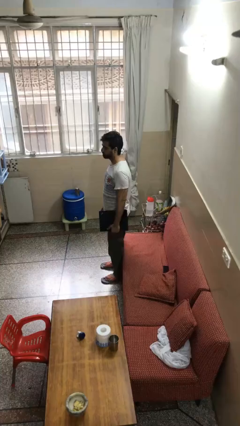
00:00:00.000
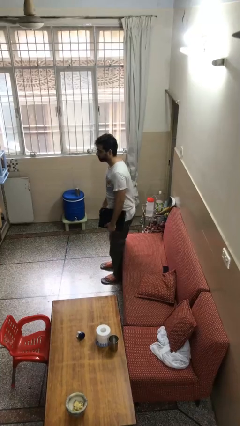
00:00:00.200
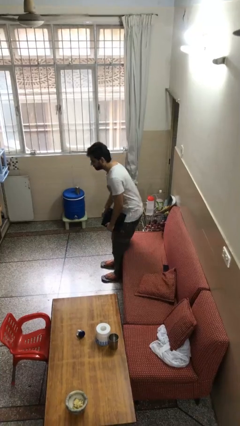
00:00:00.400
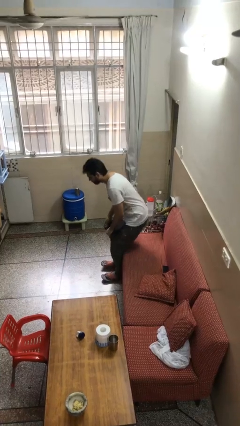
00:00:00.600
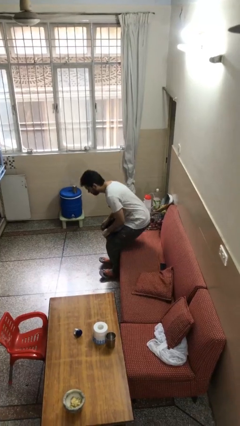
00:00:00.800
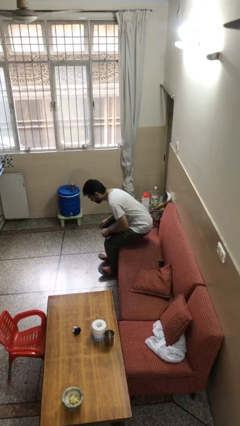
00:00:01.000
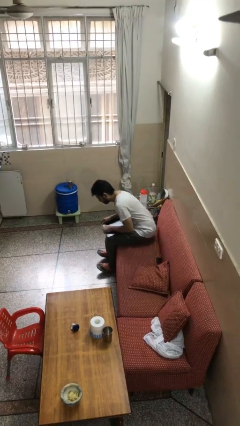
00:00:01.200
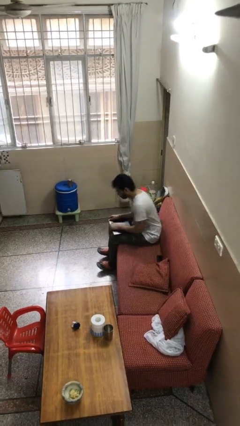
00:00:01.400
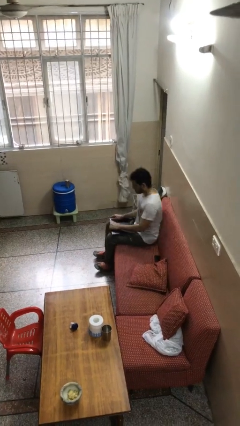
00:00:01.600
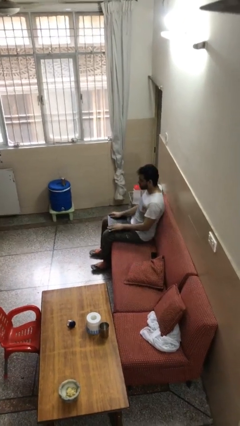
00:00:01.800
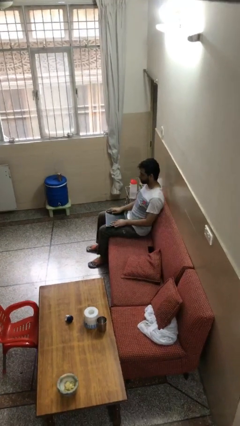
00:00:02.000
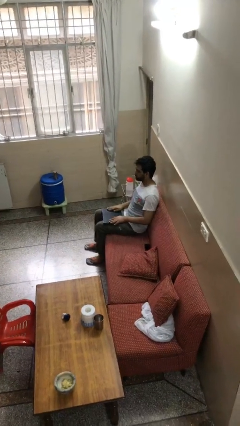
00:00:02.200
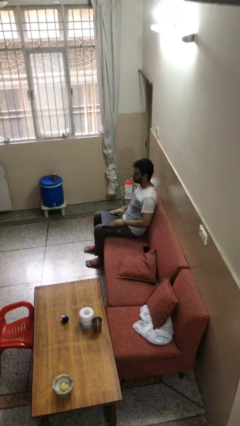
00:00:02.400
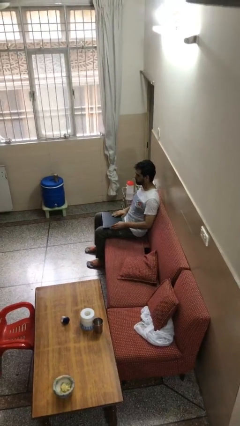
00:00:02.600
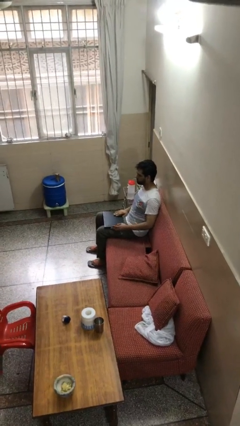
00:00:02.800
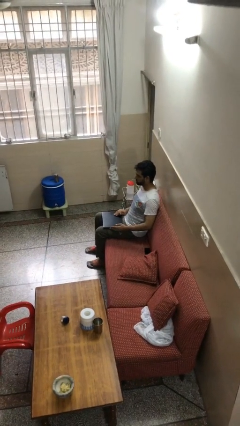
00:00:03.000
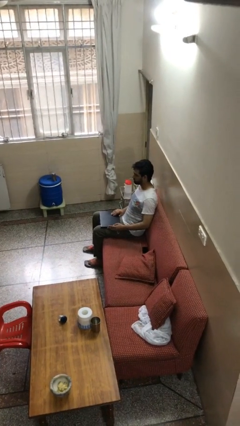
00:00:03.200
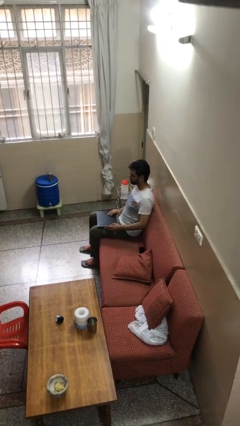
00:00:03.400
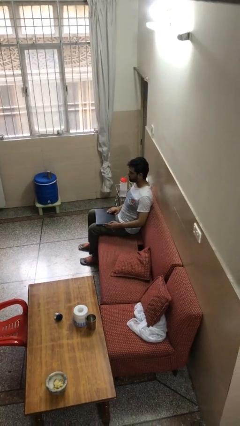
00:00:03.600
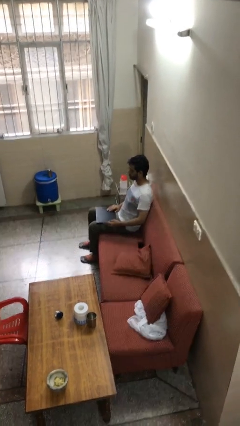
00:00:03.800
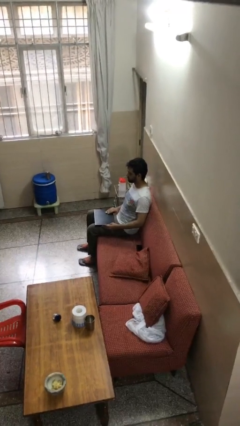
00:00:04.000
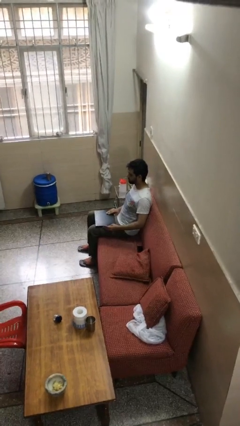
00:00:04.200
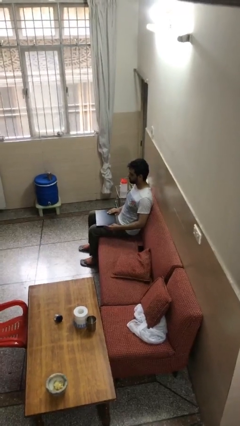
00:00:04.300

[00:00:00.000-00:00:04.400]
person sits down

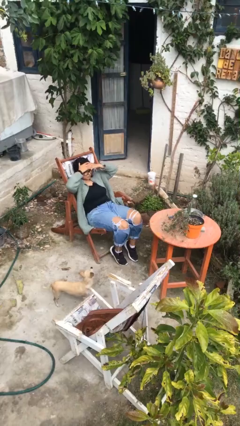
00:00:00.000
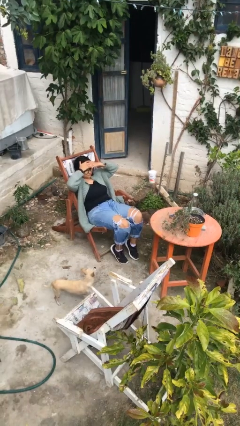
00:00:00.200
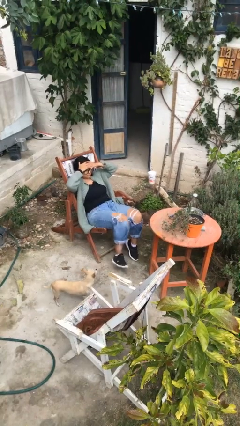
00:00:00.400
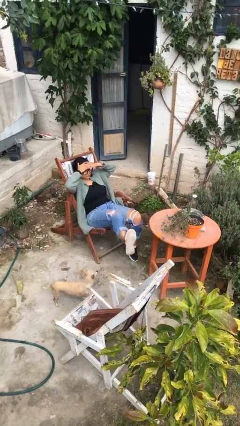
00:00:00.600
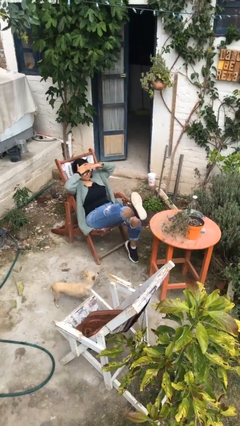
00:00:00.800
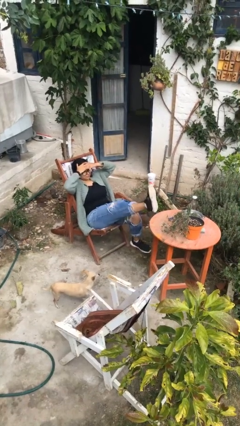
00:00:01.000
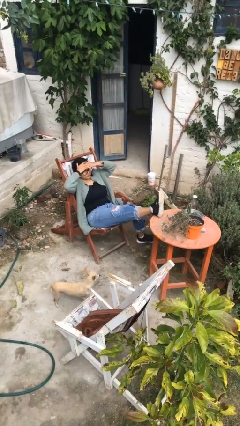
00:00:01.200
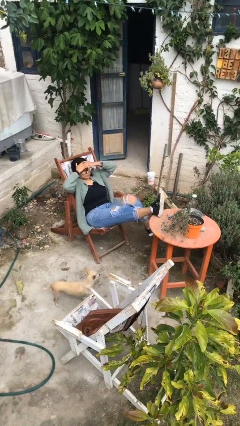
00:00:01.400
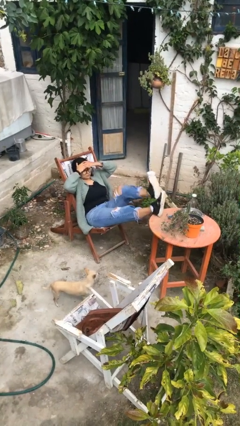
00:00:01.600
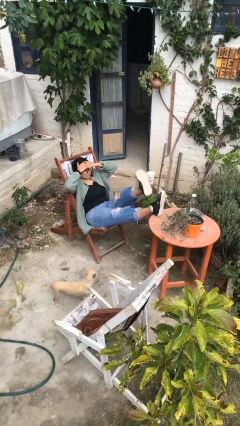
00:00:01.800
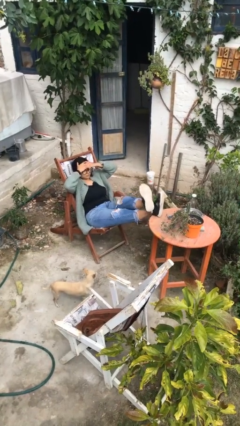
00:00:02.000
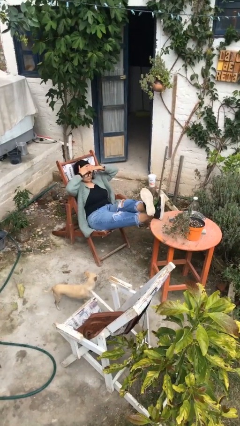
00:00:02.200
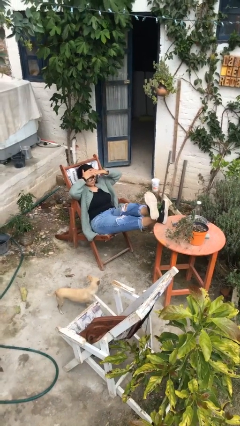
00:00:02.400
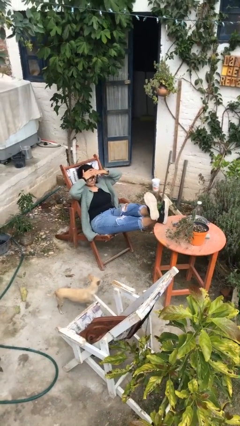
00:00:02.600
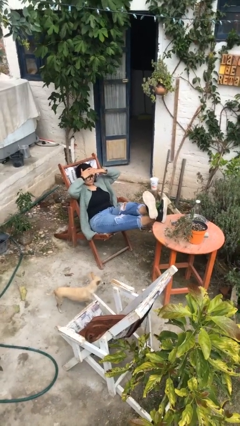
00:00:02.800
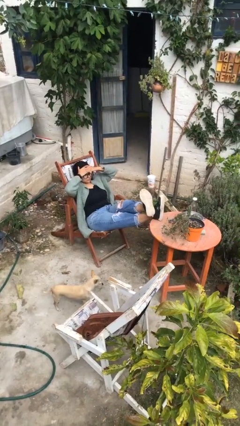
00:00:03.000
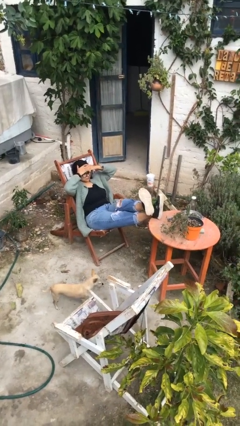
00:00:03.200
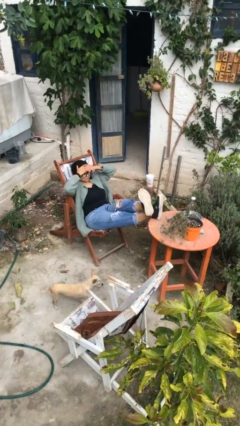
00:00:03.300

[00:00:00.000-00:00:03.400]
person puts feet up

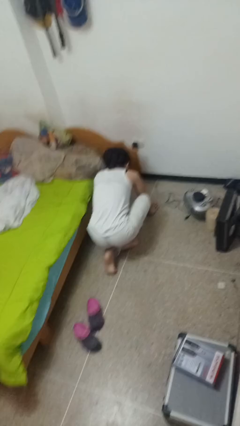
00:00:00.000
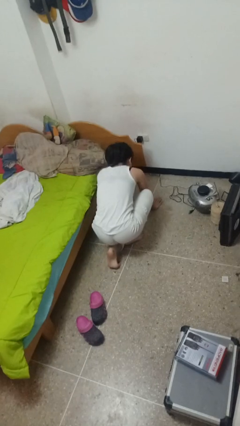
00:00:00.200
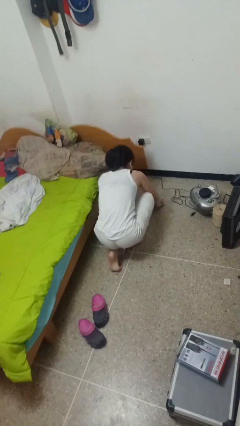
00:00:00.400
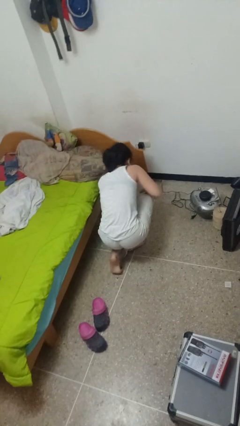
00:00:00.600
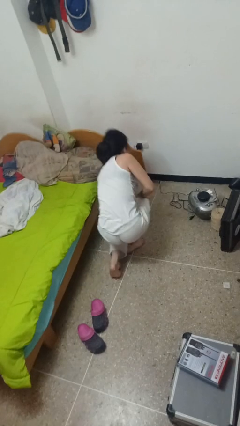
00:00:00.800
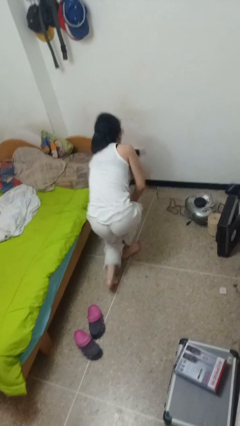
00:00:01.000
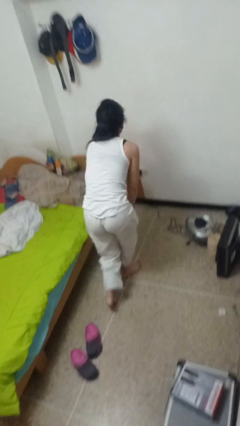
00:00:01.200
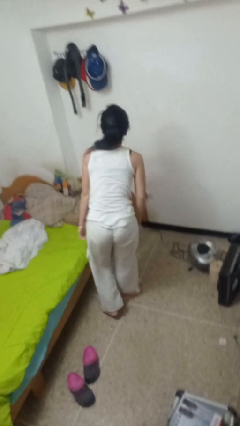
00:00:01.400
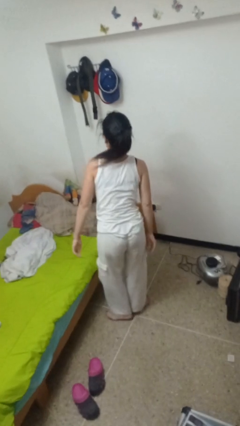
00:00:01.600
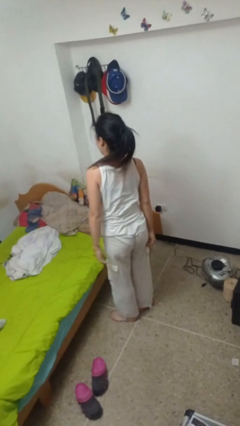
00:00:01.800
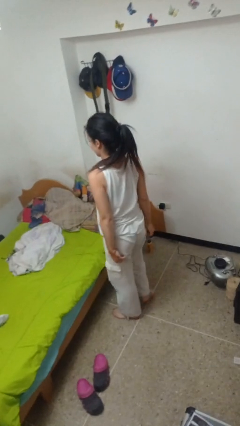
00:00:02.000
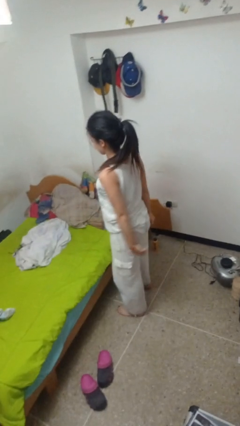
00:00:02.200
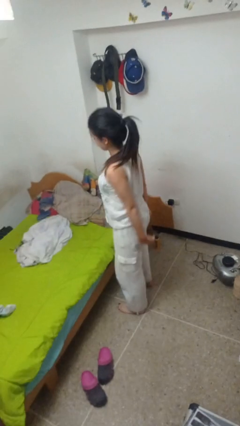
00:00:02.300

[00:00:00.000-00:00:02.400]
person stands up from floor

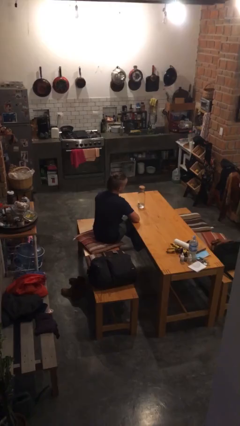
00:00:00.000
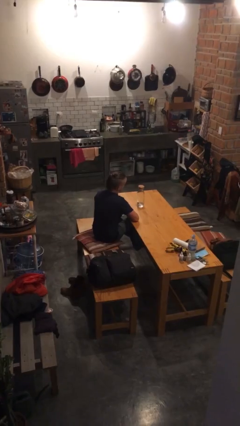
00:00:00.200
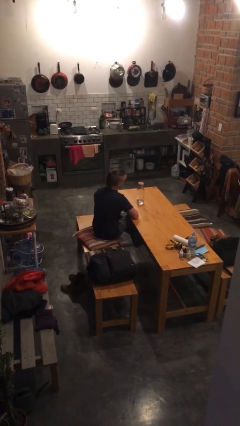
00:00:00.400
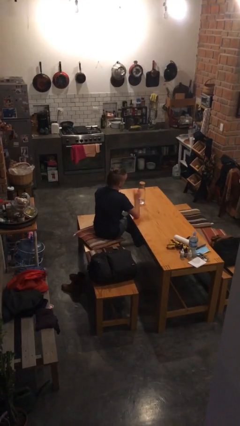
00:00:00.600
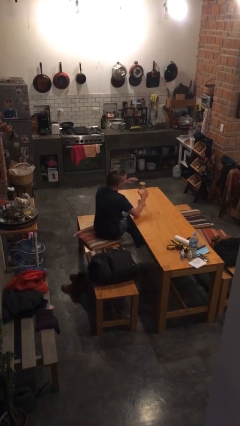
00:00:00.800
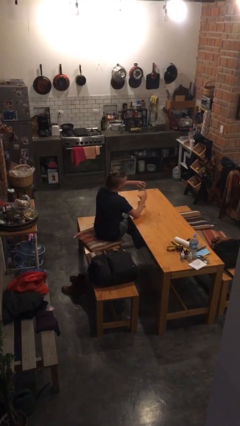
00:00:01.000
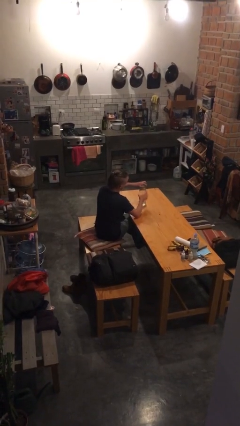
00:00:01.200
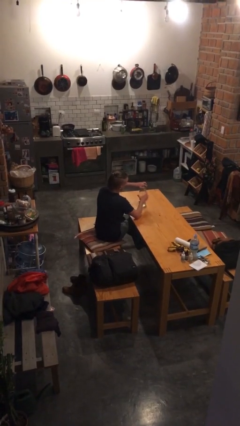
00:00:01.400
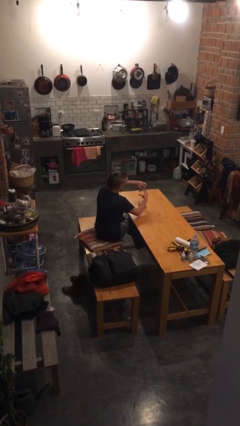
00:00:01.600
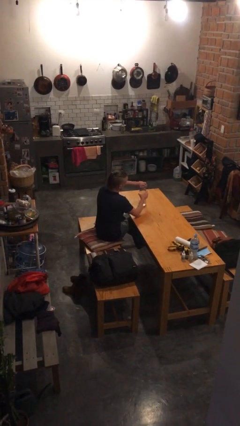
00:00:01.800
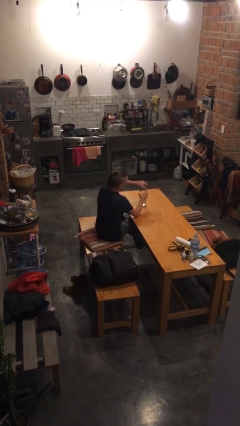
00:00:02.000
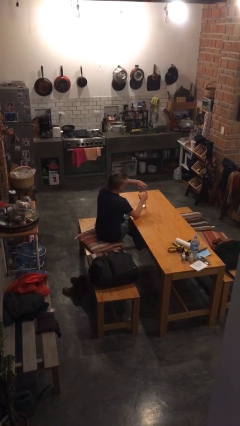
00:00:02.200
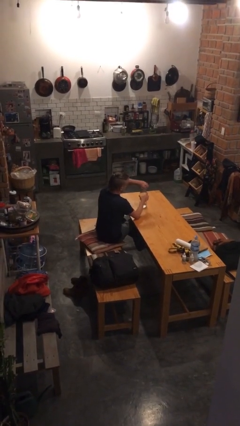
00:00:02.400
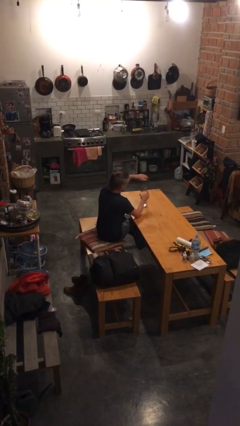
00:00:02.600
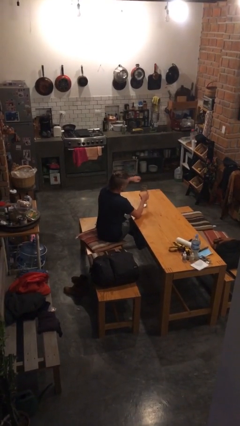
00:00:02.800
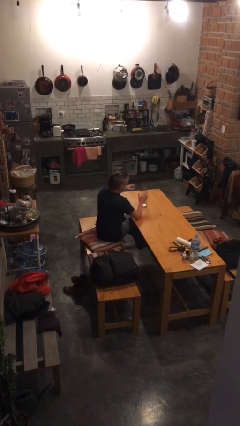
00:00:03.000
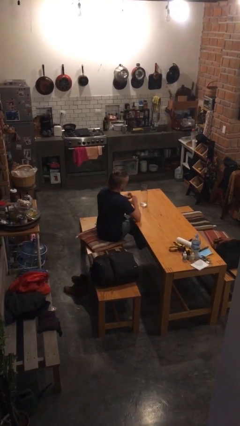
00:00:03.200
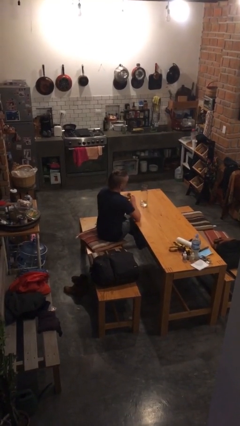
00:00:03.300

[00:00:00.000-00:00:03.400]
person opens jar

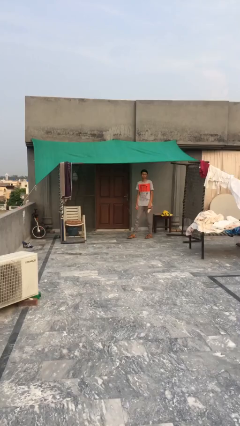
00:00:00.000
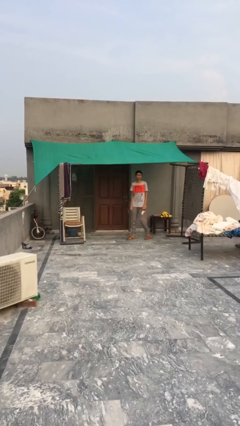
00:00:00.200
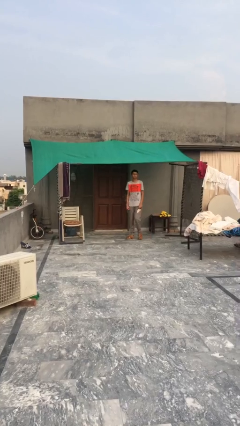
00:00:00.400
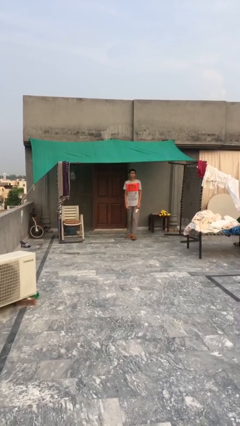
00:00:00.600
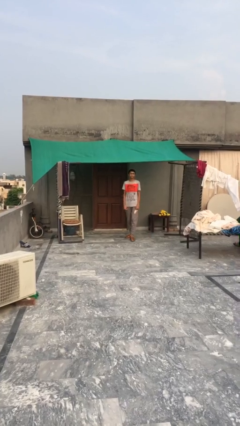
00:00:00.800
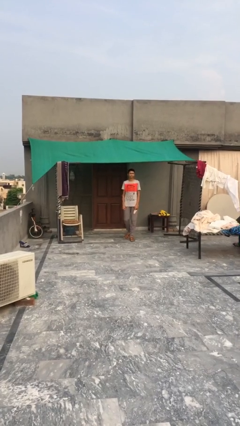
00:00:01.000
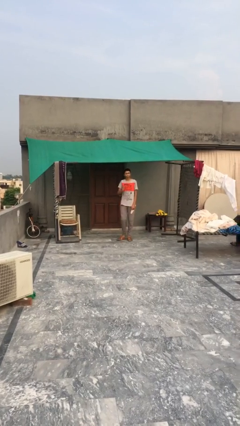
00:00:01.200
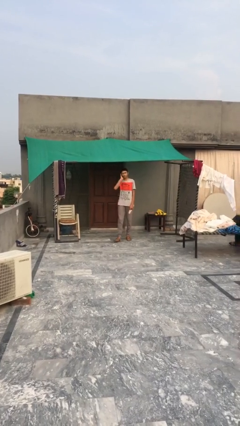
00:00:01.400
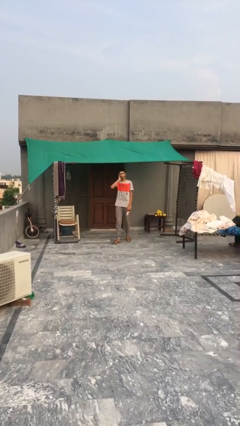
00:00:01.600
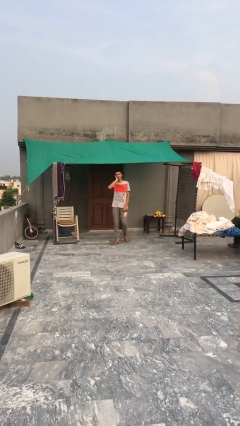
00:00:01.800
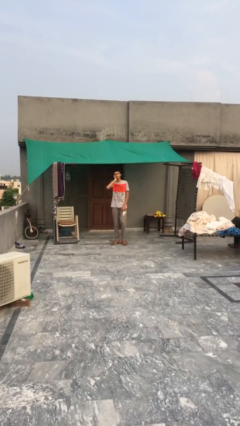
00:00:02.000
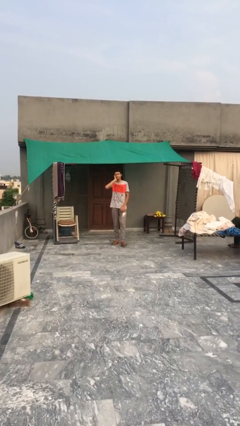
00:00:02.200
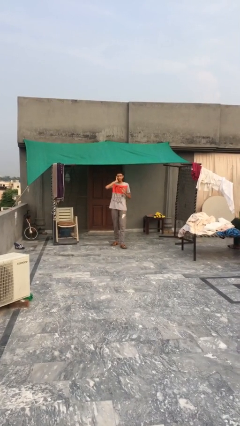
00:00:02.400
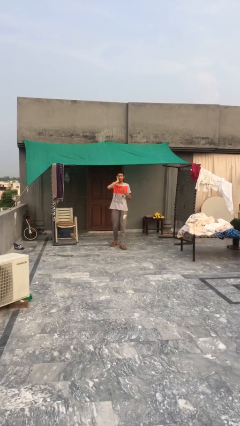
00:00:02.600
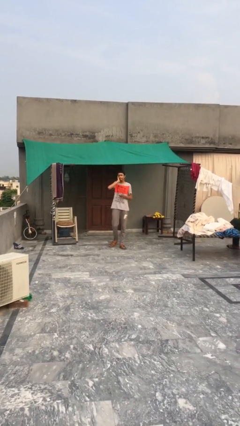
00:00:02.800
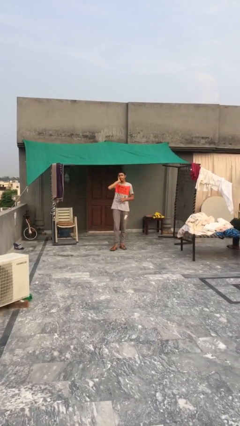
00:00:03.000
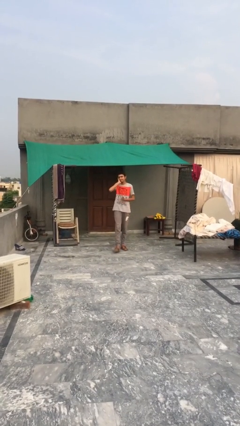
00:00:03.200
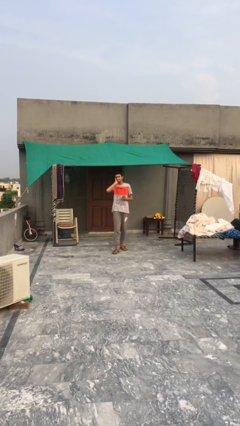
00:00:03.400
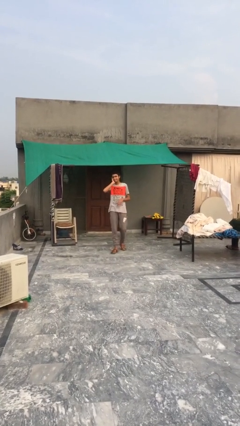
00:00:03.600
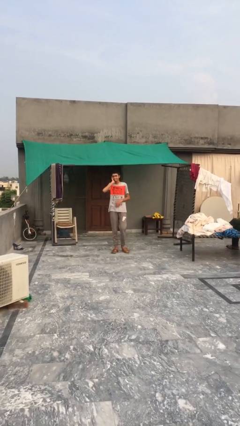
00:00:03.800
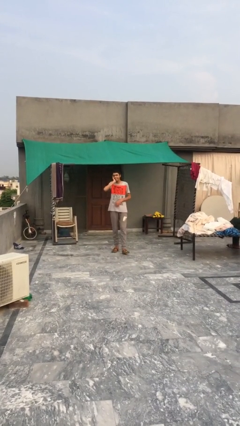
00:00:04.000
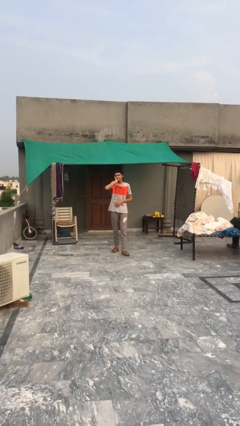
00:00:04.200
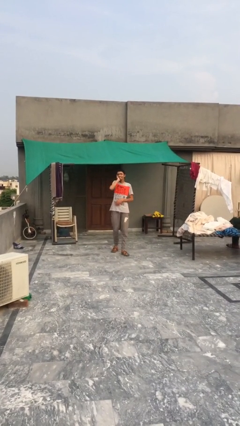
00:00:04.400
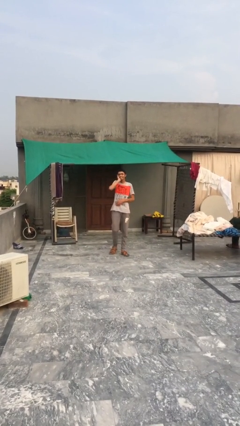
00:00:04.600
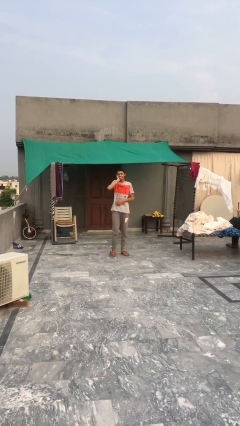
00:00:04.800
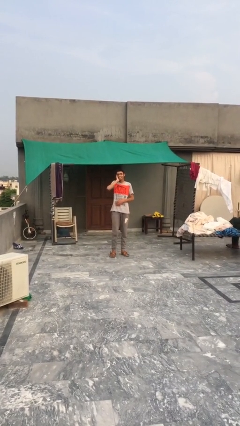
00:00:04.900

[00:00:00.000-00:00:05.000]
person enters scene through structure
